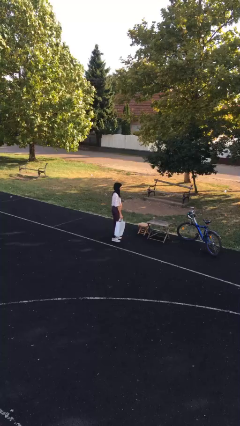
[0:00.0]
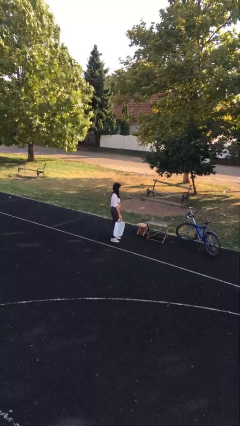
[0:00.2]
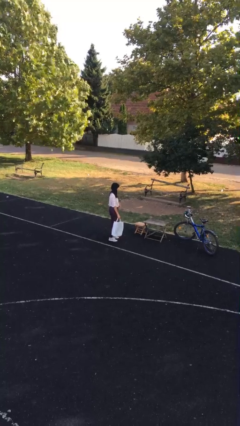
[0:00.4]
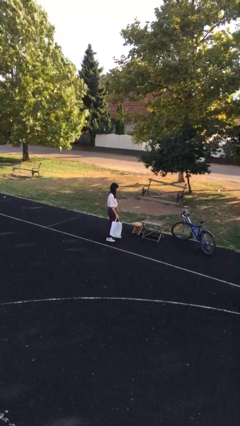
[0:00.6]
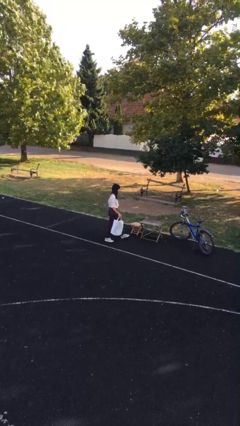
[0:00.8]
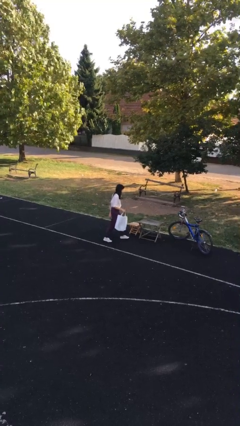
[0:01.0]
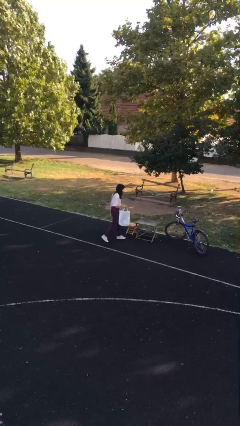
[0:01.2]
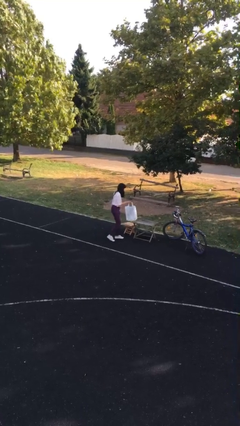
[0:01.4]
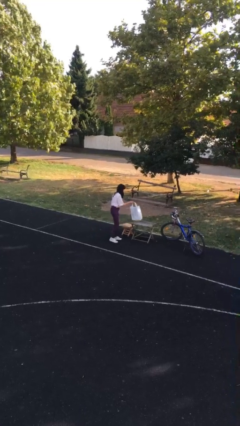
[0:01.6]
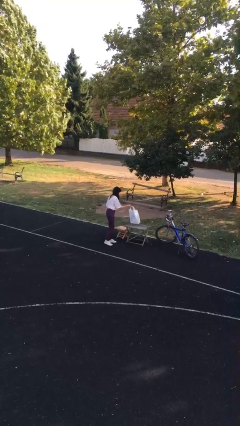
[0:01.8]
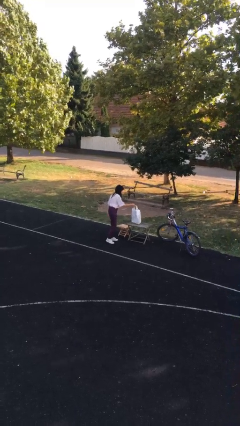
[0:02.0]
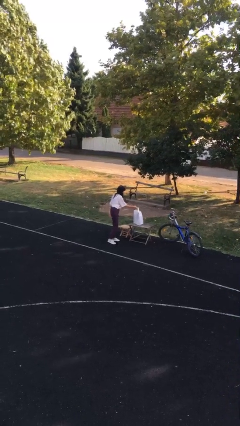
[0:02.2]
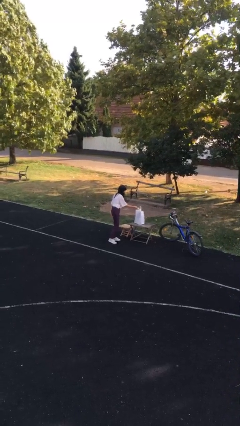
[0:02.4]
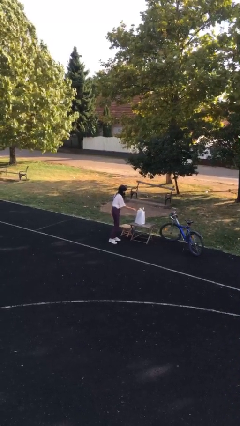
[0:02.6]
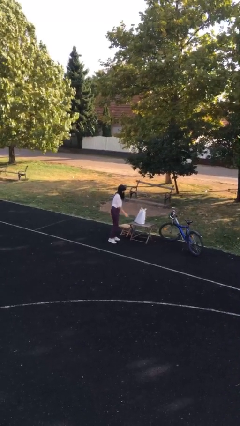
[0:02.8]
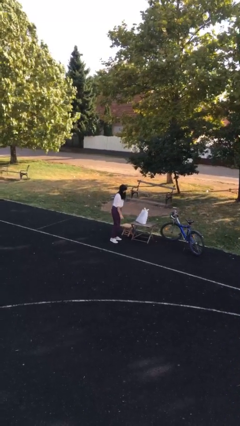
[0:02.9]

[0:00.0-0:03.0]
person puts down object on table

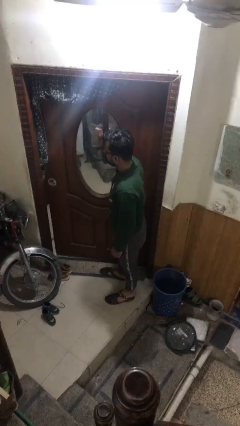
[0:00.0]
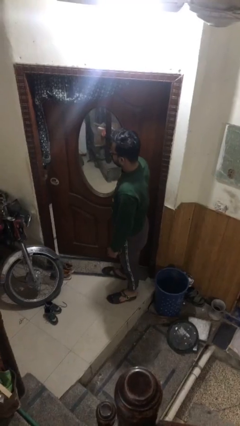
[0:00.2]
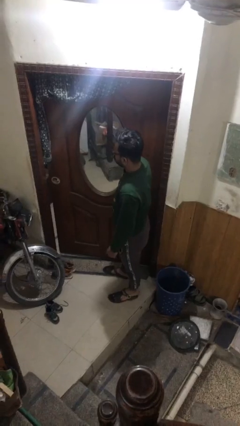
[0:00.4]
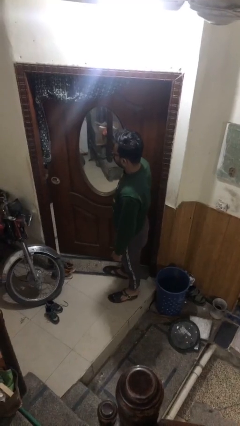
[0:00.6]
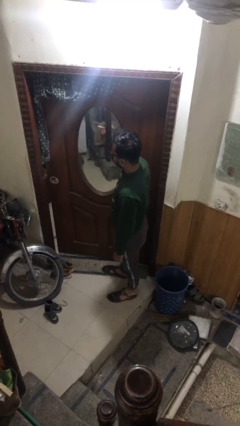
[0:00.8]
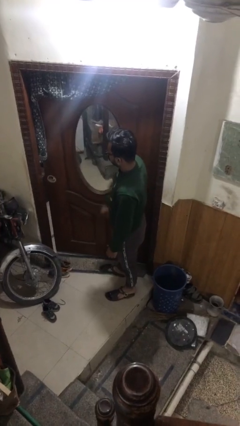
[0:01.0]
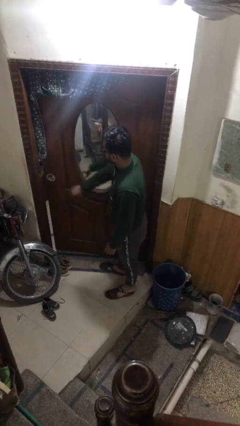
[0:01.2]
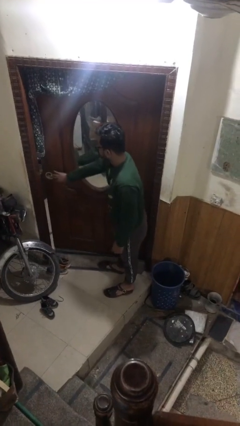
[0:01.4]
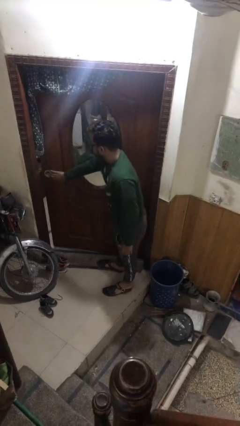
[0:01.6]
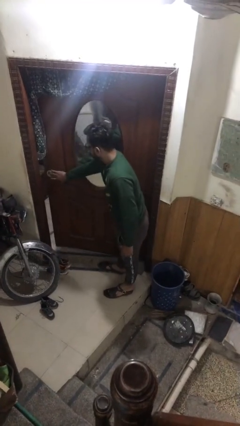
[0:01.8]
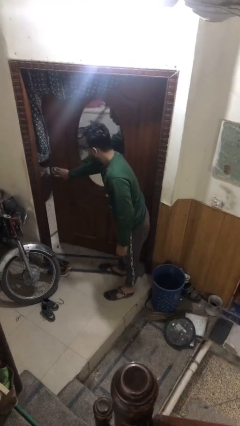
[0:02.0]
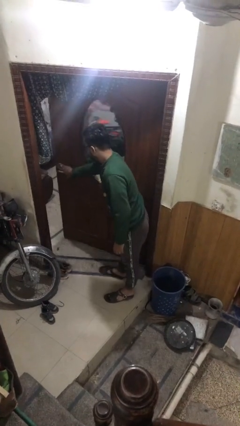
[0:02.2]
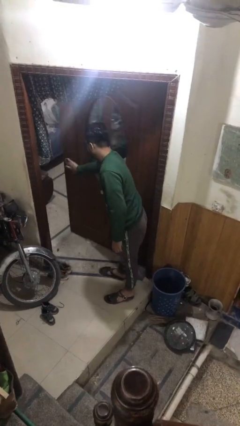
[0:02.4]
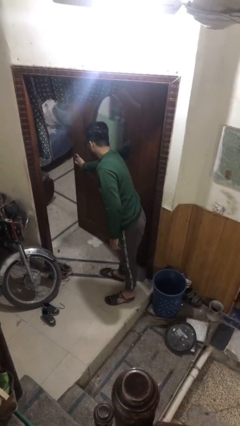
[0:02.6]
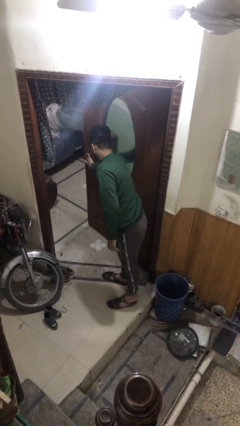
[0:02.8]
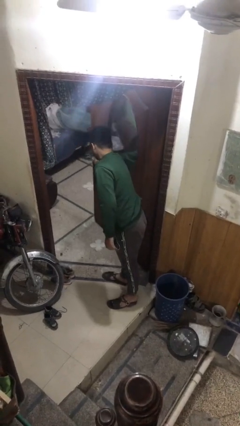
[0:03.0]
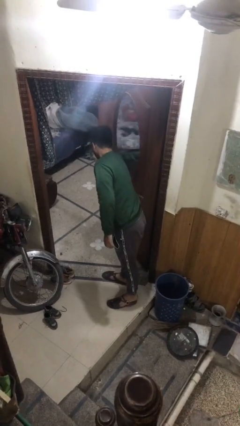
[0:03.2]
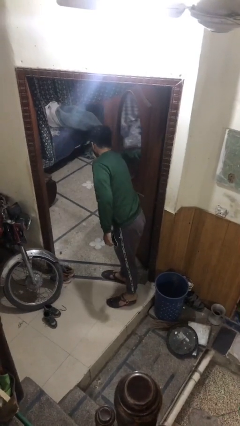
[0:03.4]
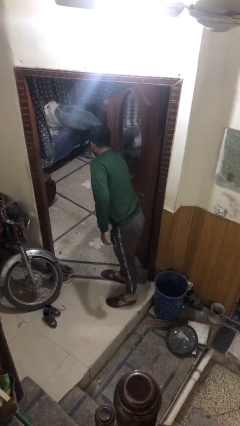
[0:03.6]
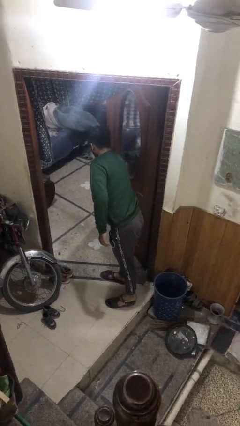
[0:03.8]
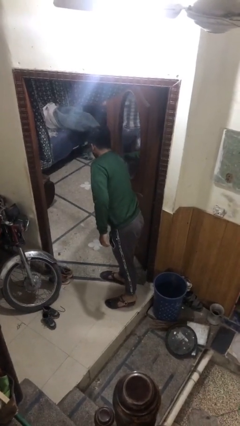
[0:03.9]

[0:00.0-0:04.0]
person opens facility door

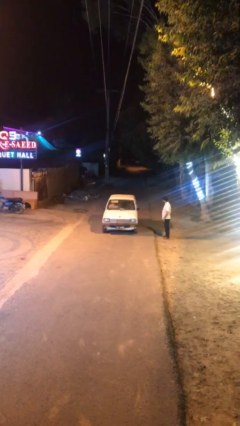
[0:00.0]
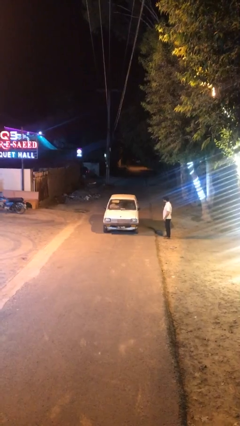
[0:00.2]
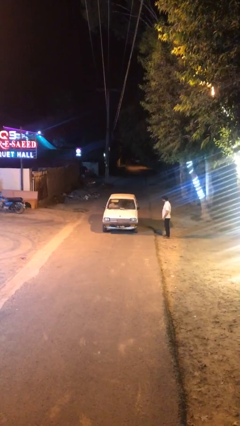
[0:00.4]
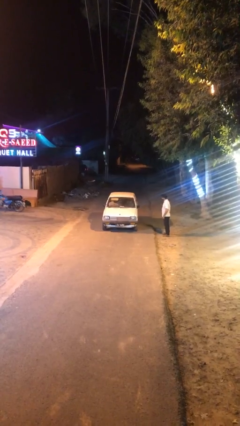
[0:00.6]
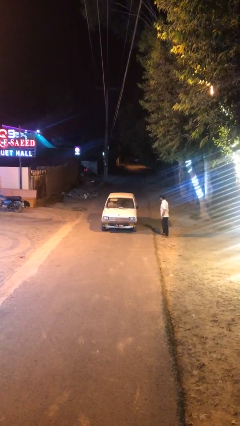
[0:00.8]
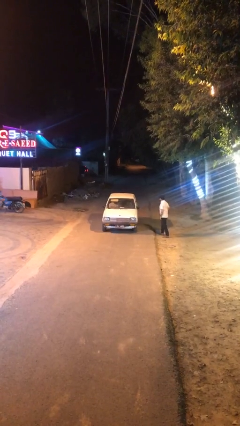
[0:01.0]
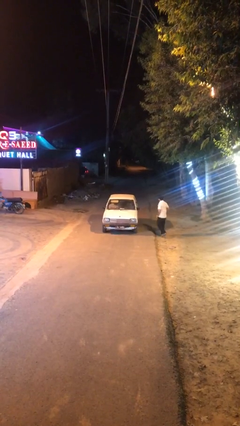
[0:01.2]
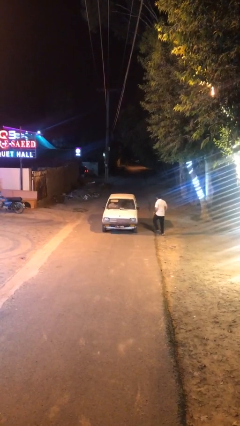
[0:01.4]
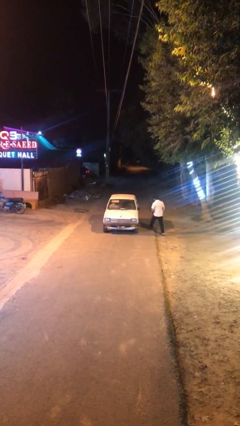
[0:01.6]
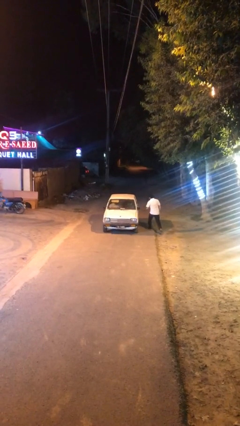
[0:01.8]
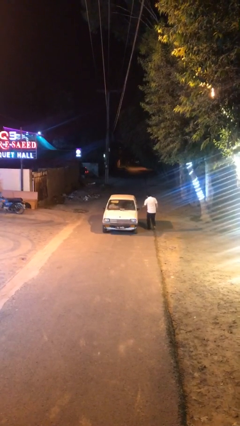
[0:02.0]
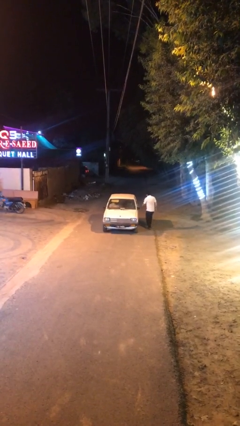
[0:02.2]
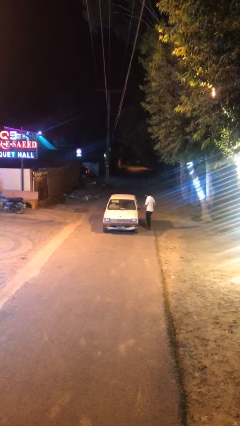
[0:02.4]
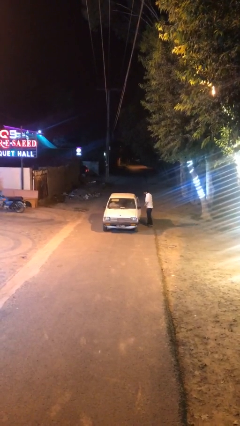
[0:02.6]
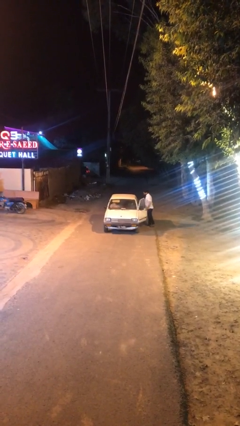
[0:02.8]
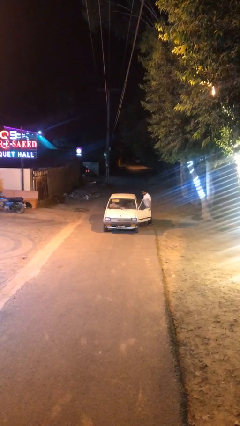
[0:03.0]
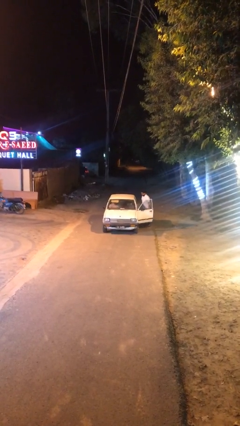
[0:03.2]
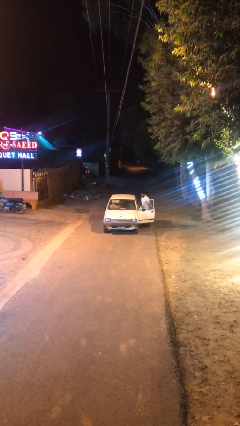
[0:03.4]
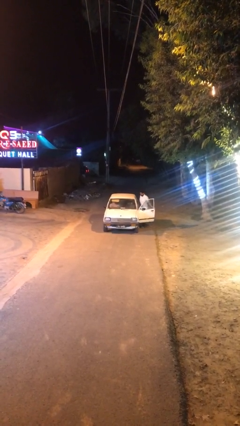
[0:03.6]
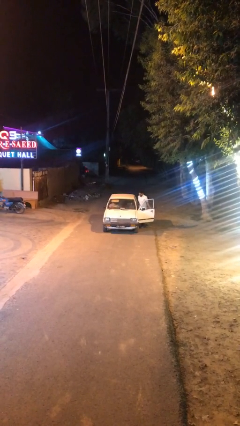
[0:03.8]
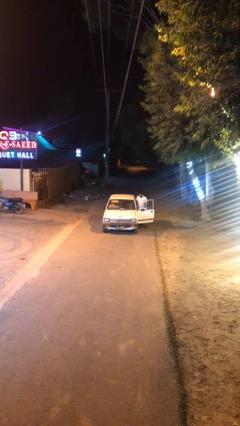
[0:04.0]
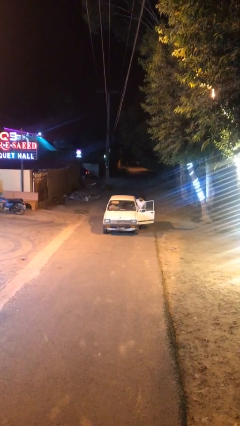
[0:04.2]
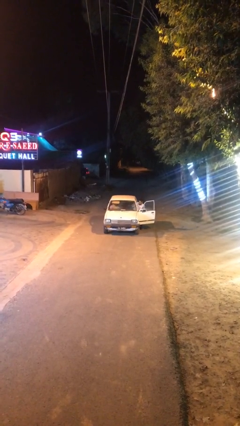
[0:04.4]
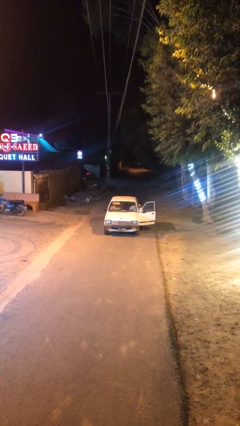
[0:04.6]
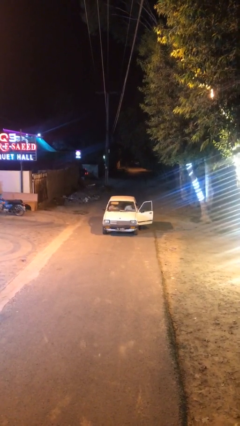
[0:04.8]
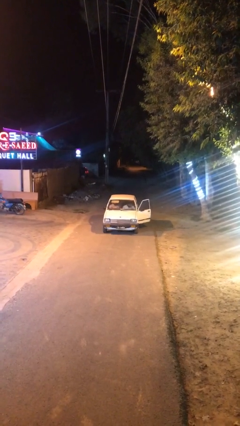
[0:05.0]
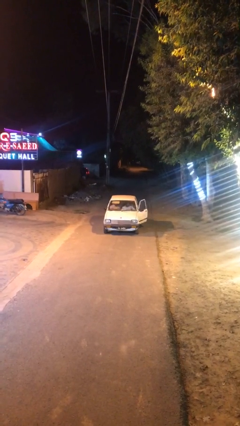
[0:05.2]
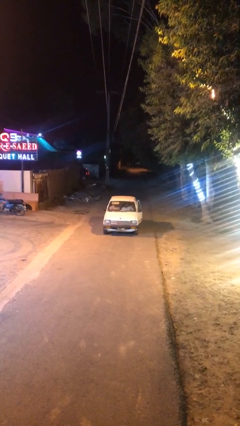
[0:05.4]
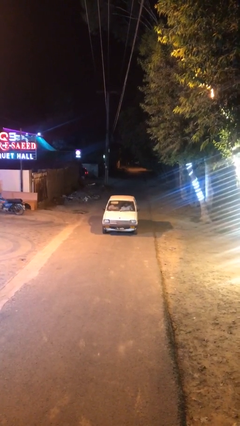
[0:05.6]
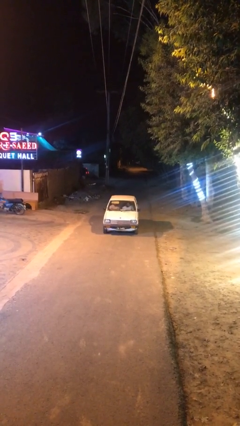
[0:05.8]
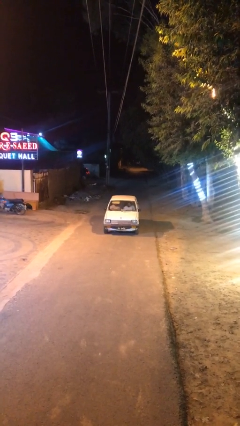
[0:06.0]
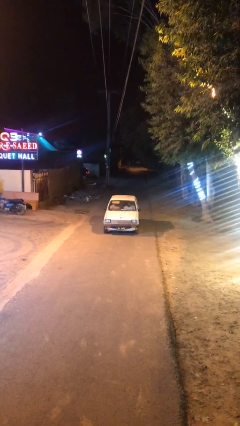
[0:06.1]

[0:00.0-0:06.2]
car picks up person

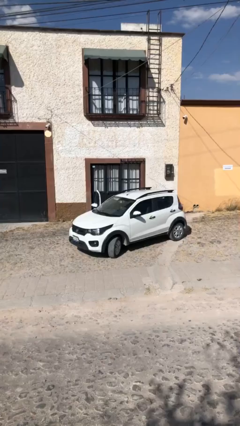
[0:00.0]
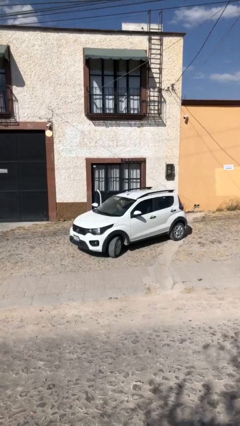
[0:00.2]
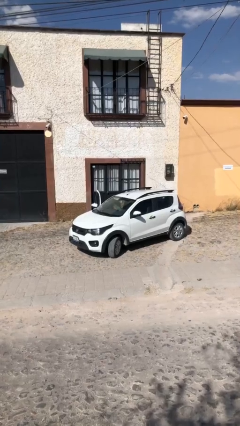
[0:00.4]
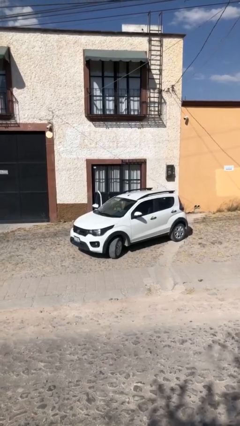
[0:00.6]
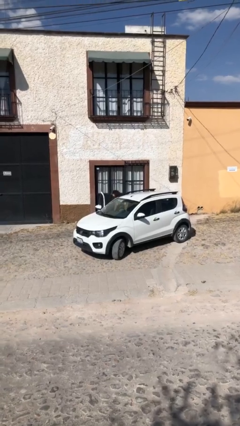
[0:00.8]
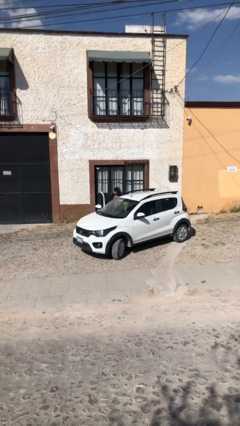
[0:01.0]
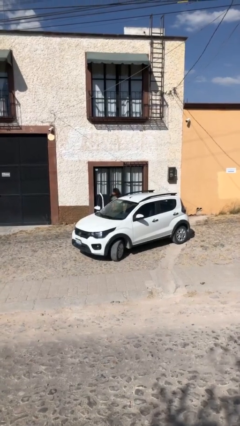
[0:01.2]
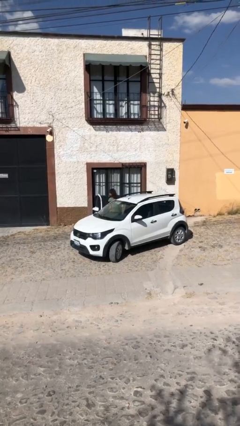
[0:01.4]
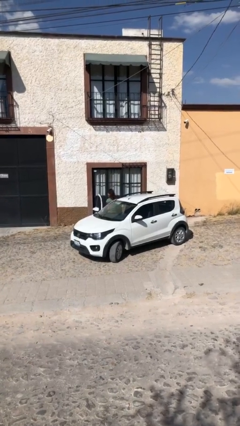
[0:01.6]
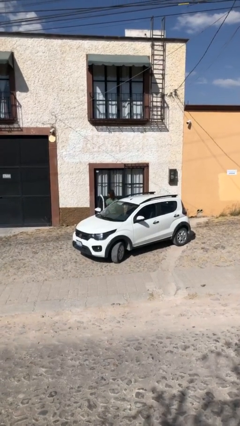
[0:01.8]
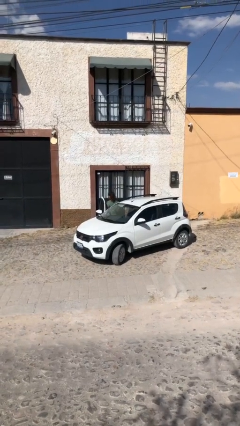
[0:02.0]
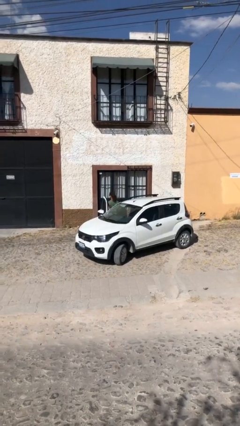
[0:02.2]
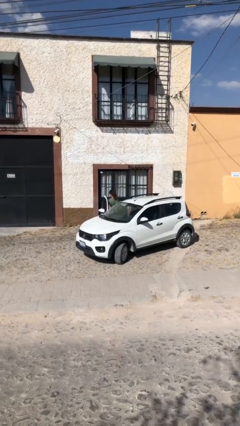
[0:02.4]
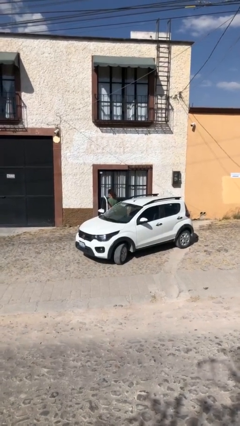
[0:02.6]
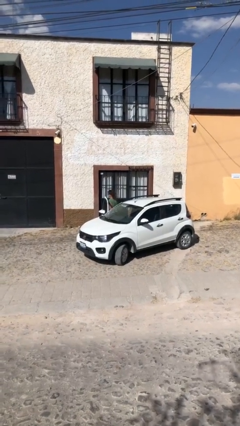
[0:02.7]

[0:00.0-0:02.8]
person exits car

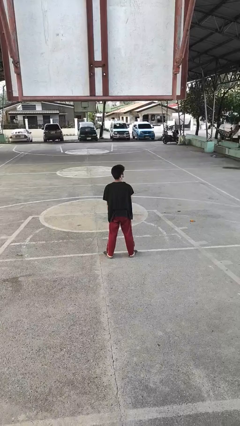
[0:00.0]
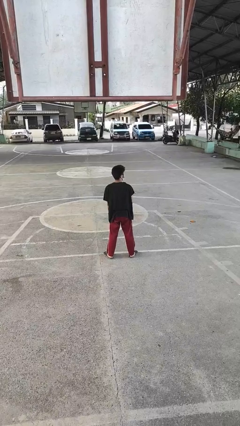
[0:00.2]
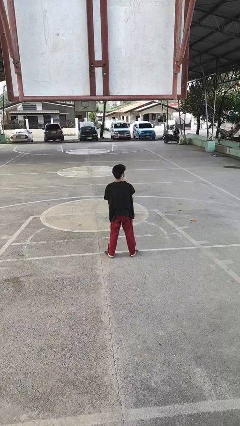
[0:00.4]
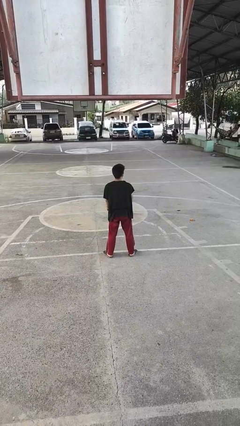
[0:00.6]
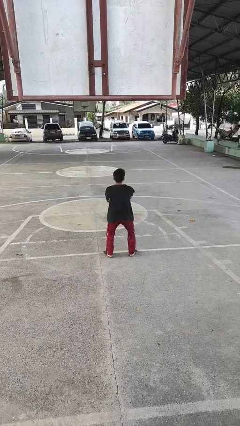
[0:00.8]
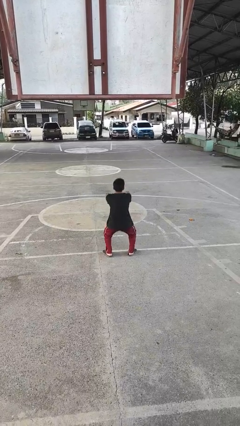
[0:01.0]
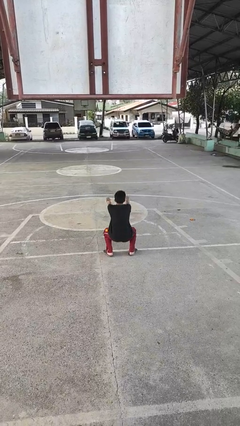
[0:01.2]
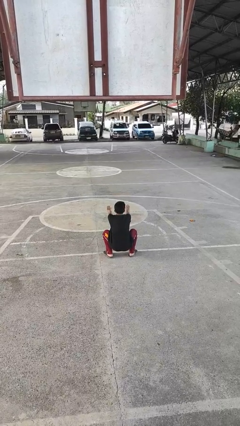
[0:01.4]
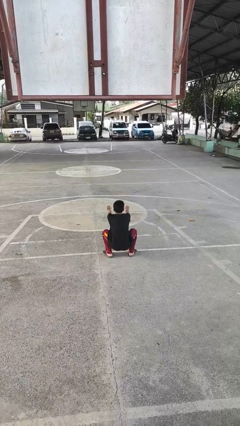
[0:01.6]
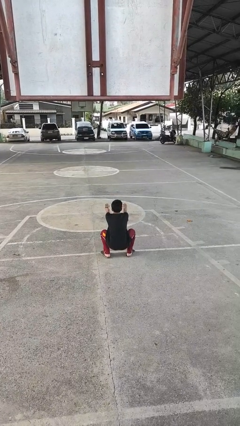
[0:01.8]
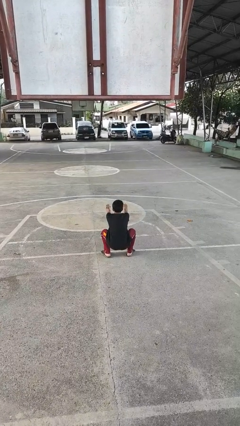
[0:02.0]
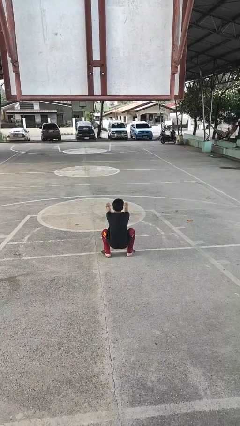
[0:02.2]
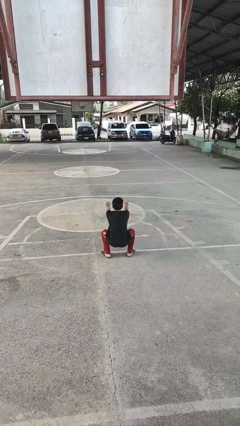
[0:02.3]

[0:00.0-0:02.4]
person squats
